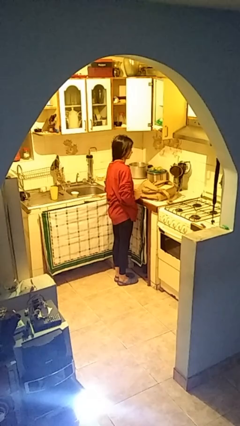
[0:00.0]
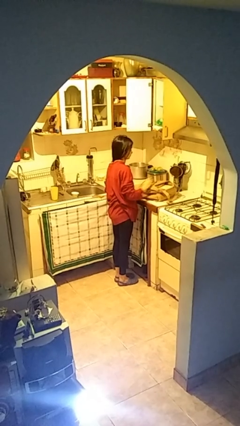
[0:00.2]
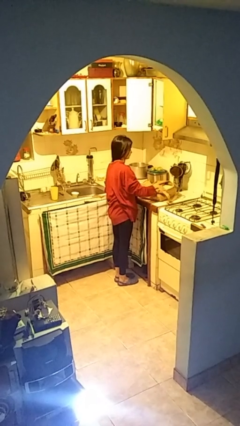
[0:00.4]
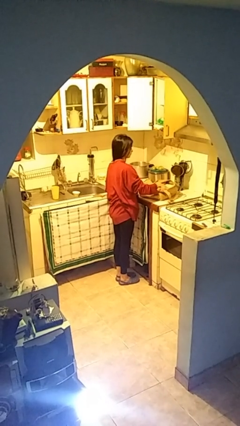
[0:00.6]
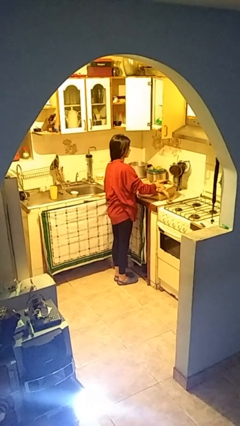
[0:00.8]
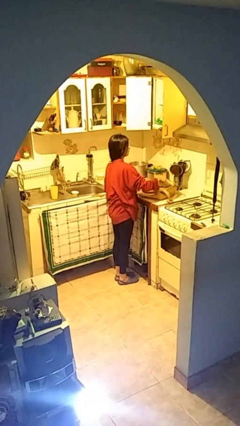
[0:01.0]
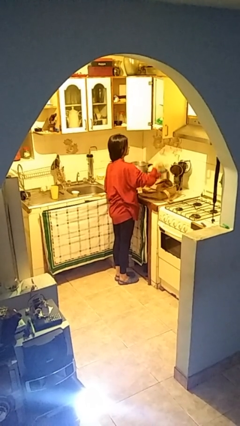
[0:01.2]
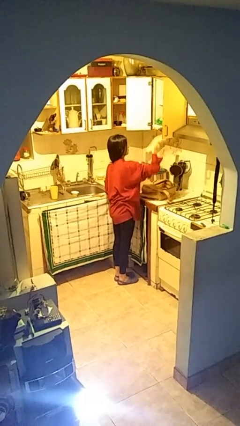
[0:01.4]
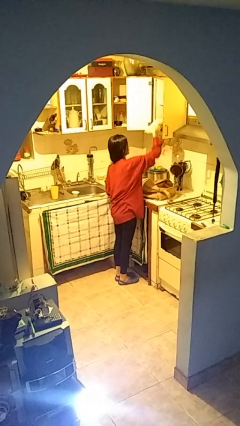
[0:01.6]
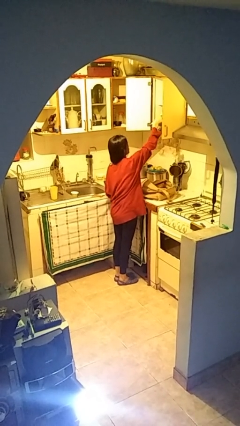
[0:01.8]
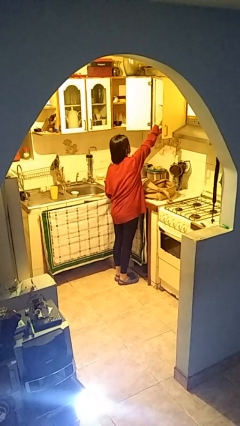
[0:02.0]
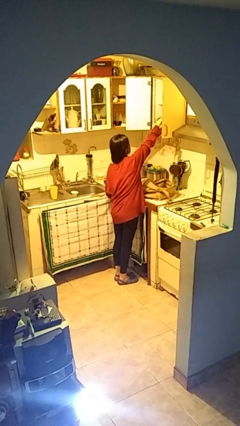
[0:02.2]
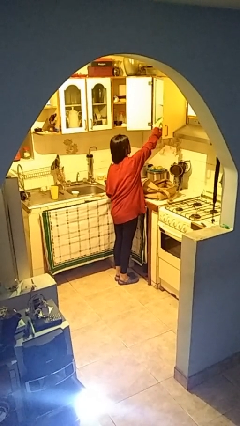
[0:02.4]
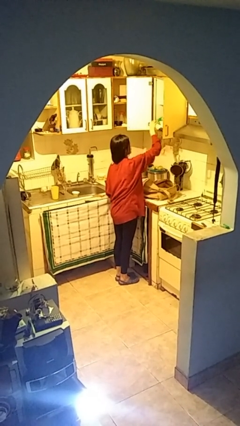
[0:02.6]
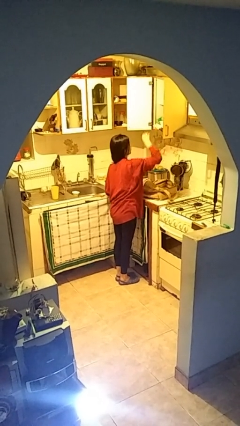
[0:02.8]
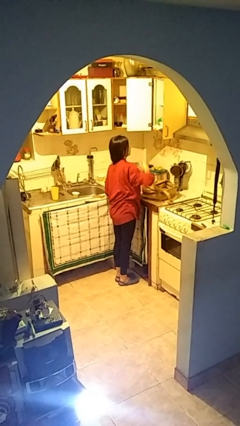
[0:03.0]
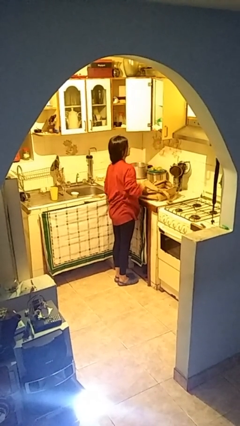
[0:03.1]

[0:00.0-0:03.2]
person loads groceries into cabinet

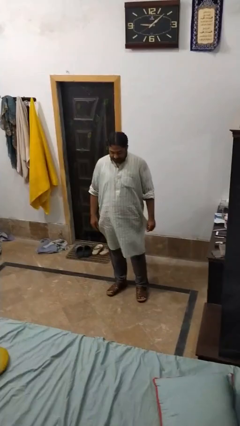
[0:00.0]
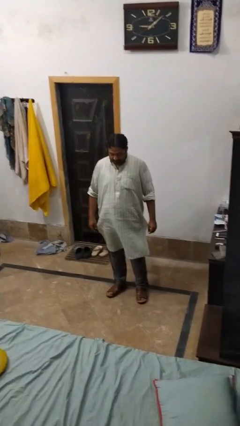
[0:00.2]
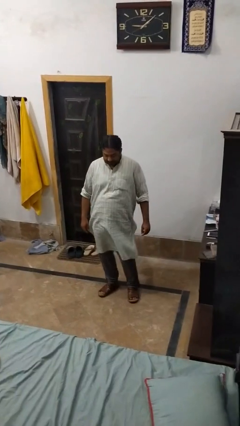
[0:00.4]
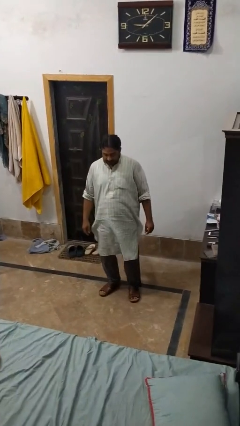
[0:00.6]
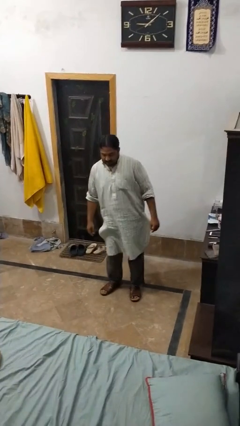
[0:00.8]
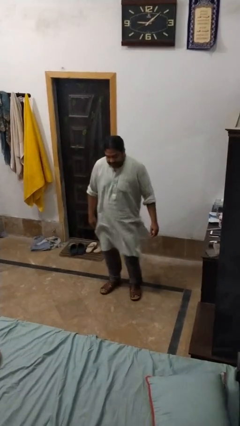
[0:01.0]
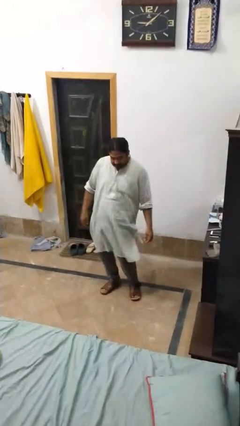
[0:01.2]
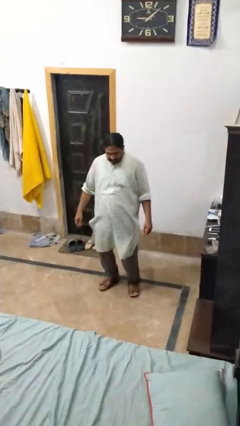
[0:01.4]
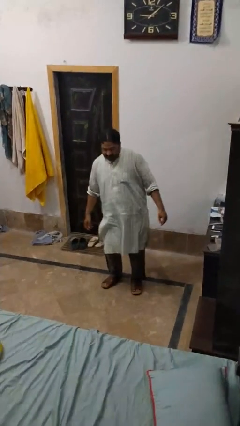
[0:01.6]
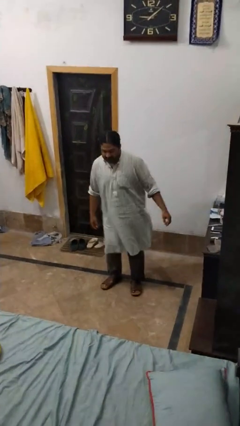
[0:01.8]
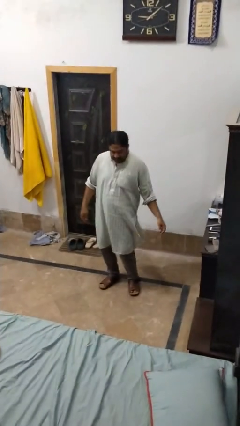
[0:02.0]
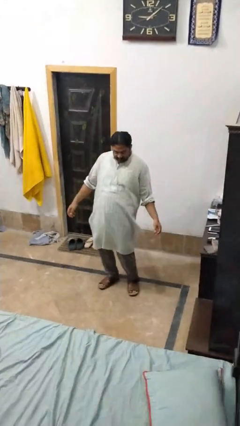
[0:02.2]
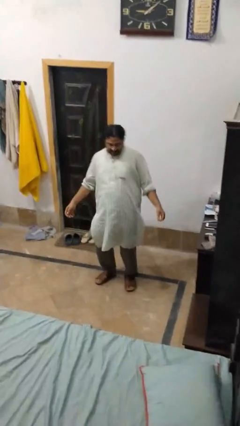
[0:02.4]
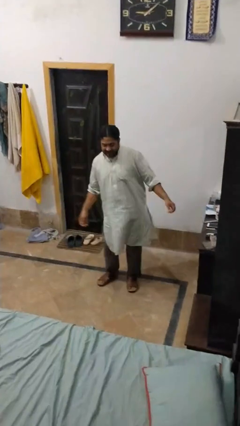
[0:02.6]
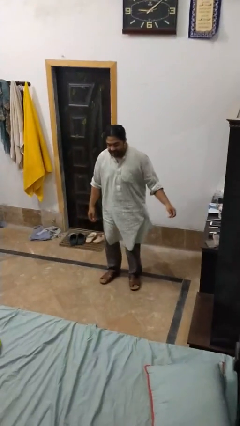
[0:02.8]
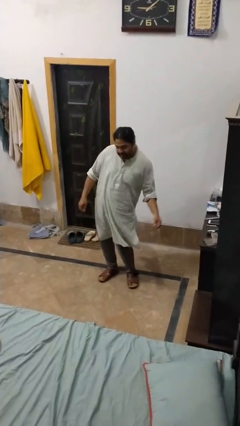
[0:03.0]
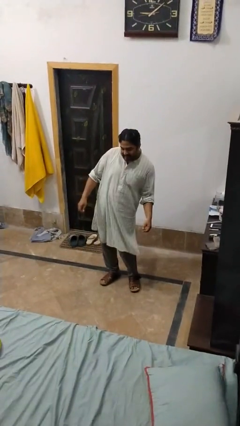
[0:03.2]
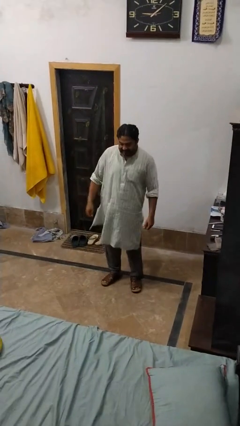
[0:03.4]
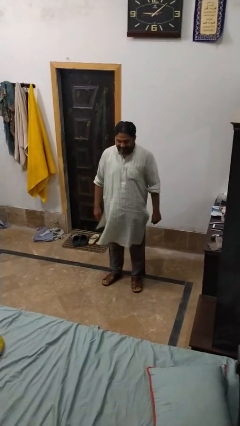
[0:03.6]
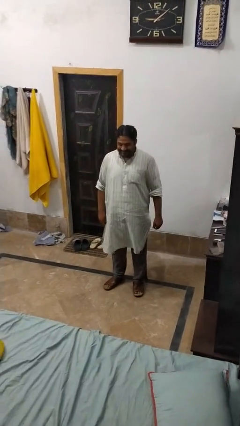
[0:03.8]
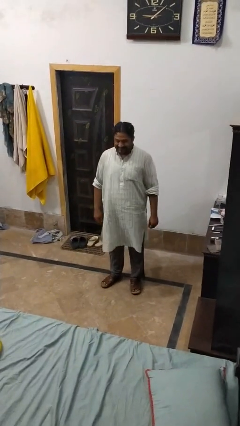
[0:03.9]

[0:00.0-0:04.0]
person wiggles hips

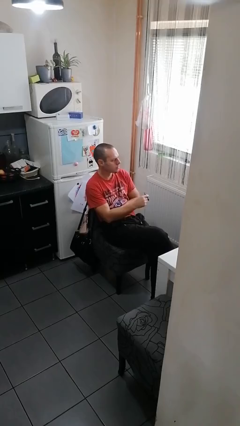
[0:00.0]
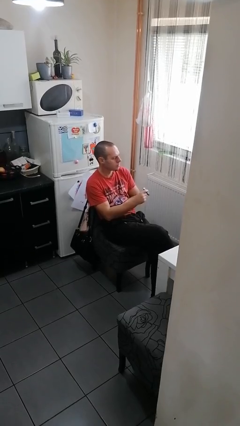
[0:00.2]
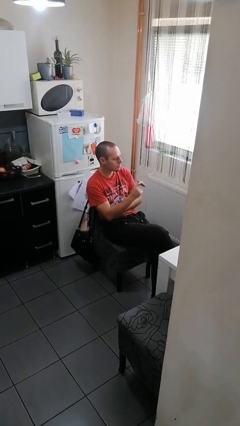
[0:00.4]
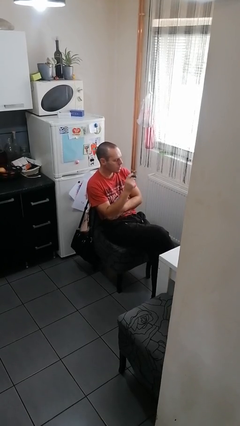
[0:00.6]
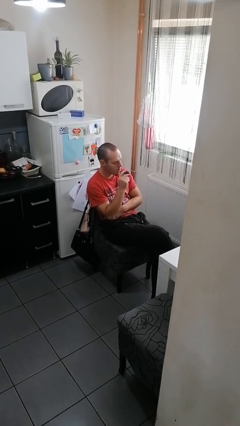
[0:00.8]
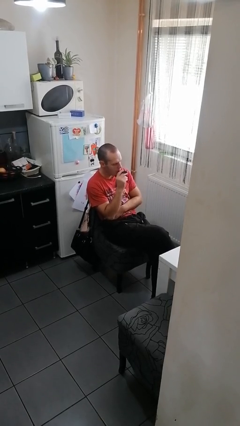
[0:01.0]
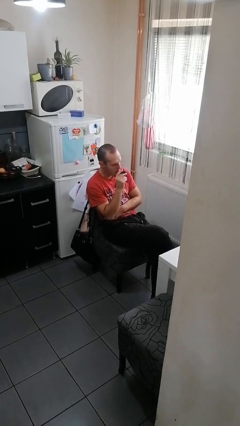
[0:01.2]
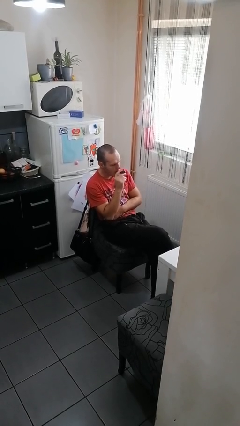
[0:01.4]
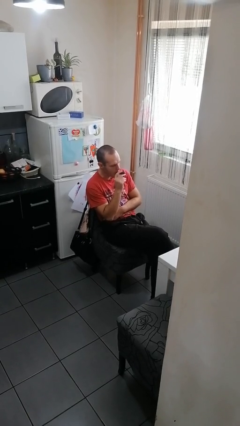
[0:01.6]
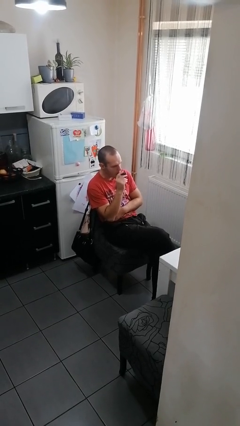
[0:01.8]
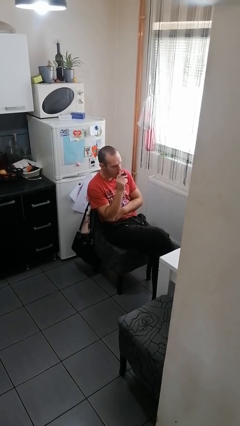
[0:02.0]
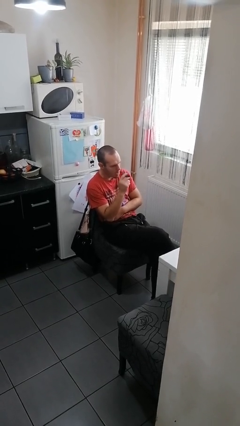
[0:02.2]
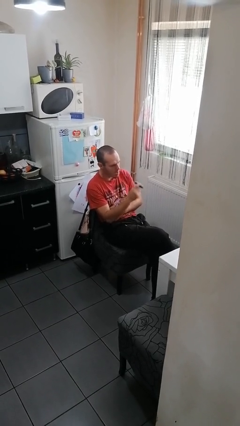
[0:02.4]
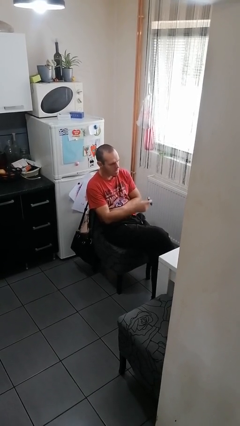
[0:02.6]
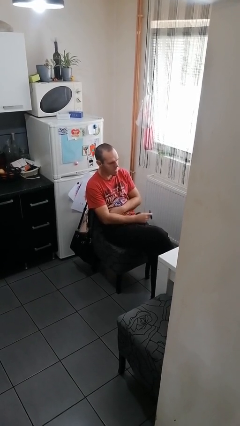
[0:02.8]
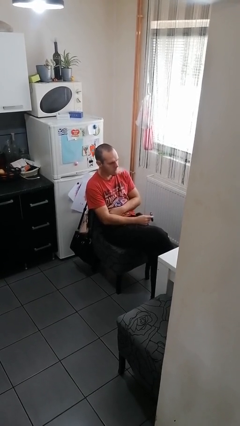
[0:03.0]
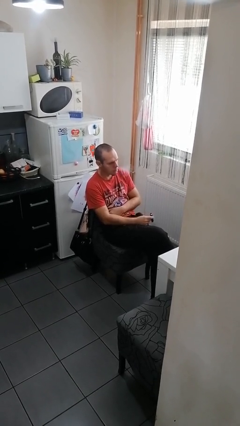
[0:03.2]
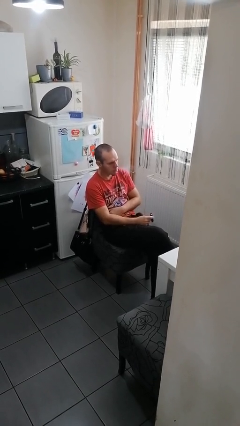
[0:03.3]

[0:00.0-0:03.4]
person vapes

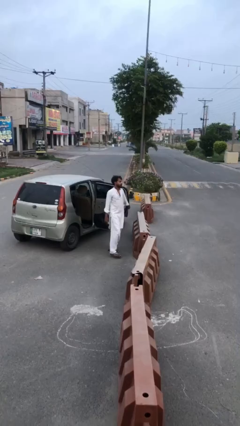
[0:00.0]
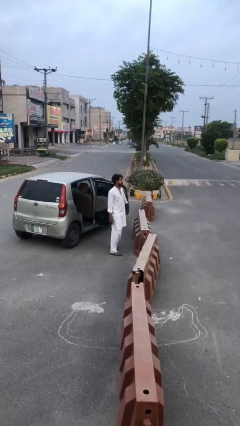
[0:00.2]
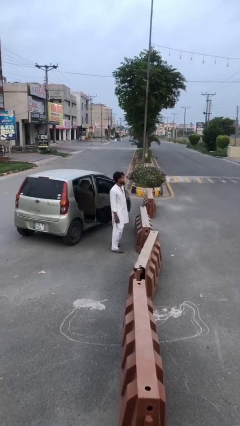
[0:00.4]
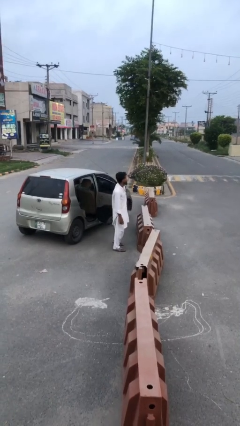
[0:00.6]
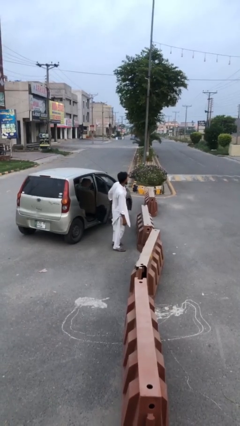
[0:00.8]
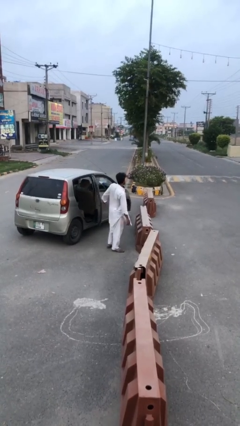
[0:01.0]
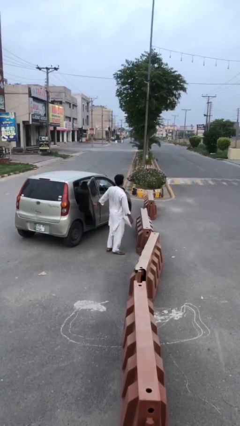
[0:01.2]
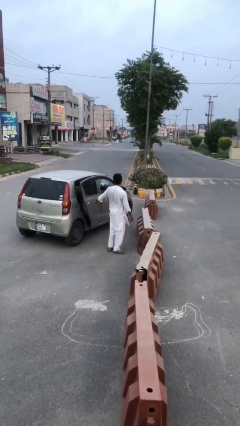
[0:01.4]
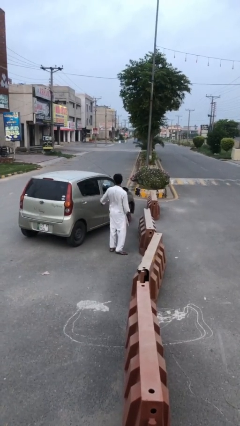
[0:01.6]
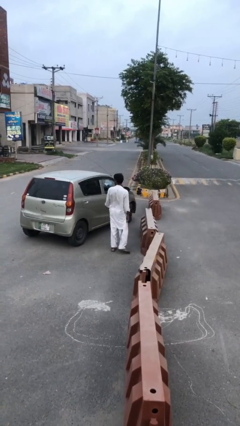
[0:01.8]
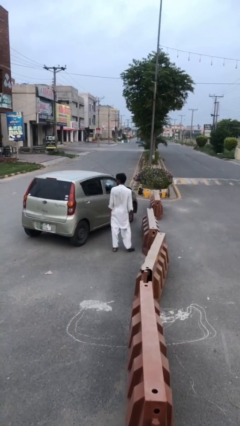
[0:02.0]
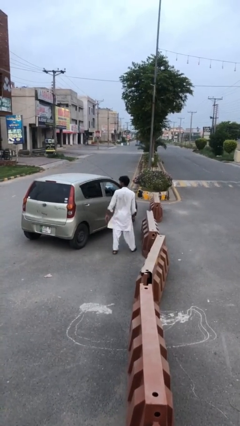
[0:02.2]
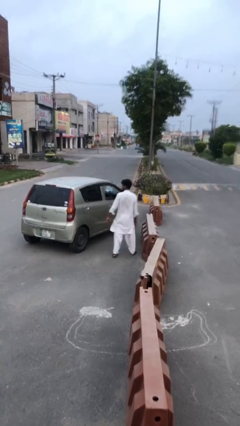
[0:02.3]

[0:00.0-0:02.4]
person closes car door

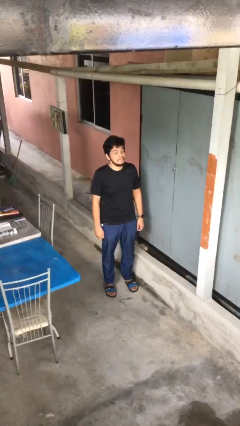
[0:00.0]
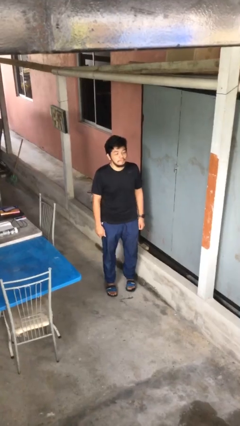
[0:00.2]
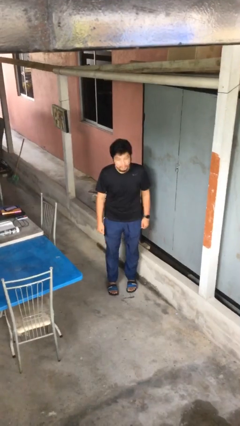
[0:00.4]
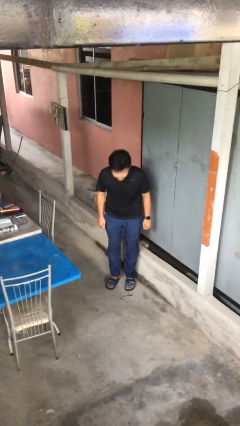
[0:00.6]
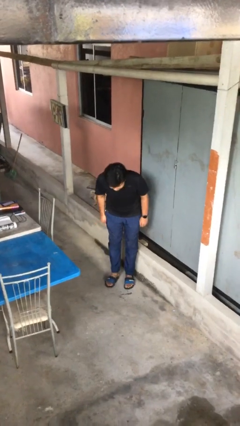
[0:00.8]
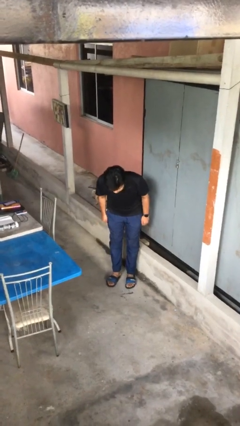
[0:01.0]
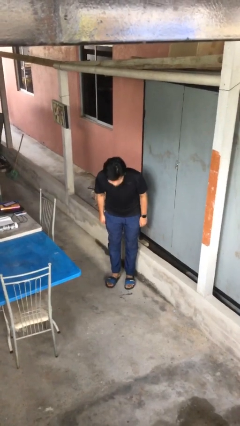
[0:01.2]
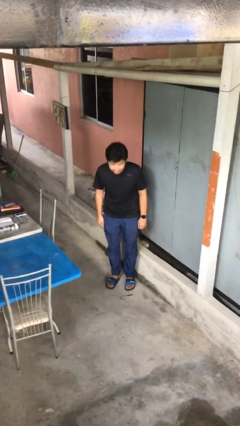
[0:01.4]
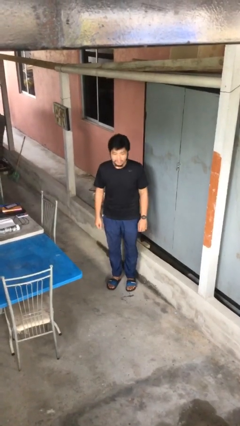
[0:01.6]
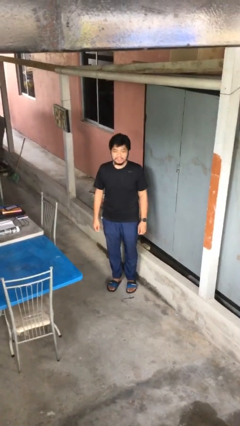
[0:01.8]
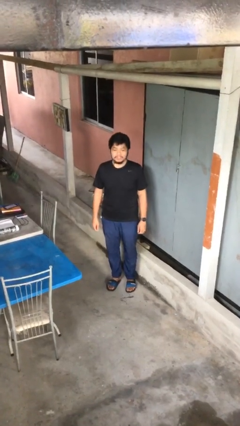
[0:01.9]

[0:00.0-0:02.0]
person bows

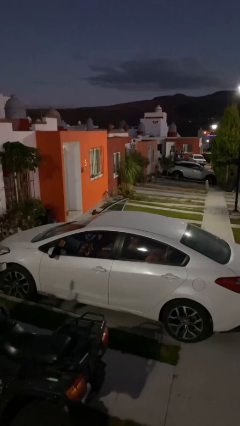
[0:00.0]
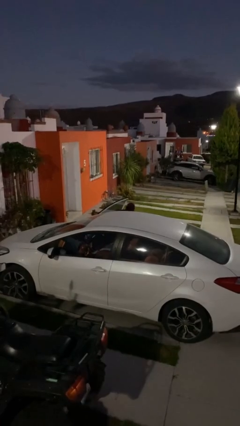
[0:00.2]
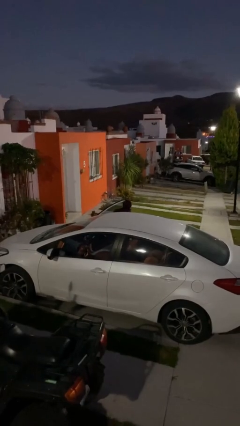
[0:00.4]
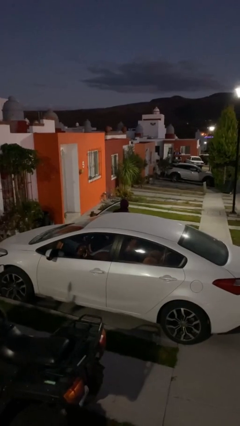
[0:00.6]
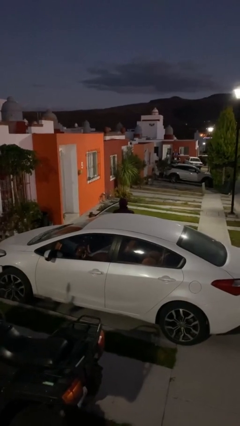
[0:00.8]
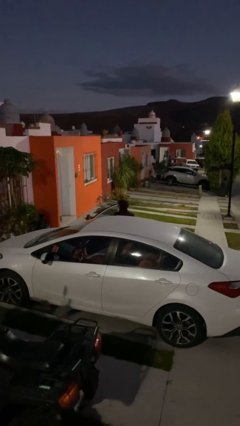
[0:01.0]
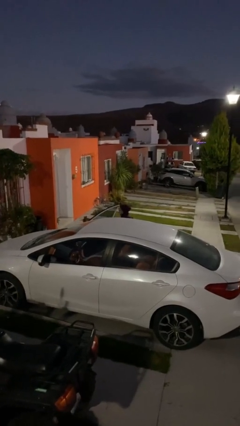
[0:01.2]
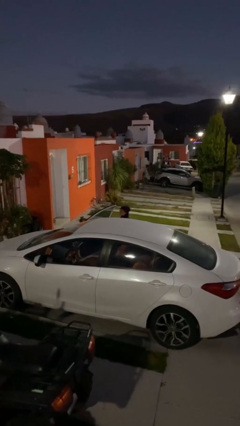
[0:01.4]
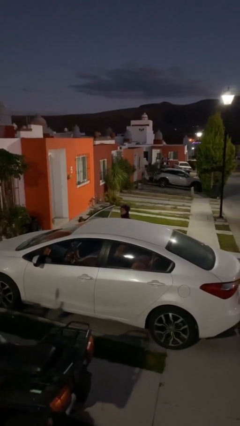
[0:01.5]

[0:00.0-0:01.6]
person exits car

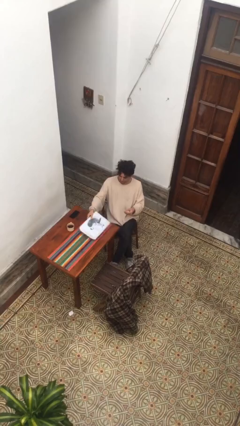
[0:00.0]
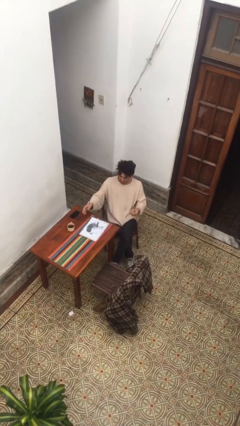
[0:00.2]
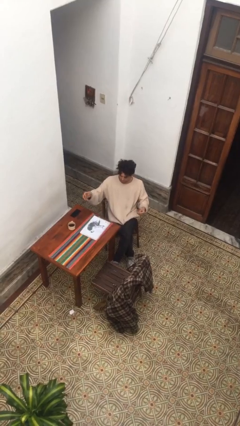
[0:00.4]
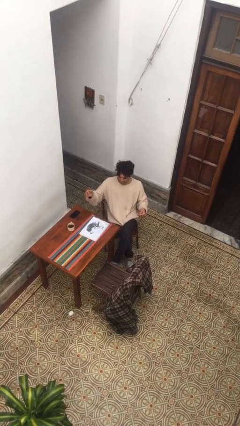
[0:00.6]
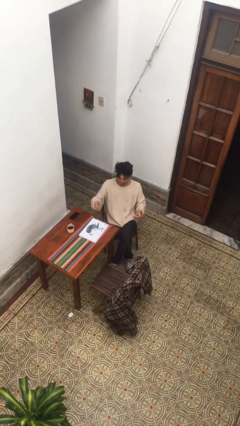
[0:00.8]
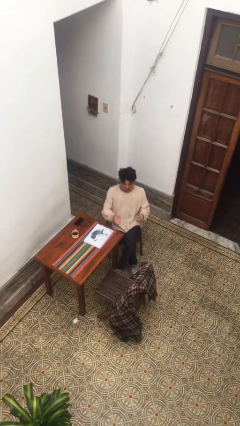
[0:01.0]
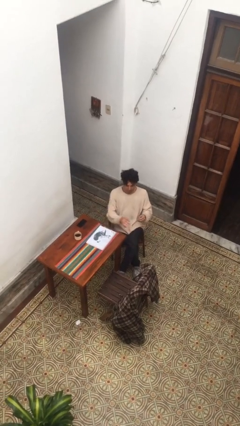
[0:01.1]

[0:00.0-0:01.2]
person puts down object on table
